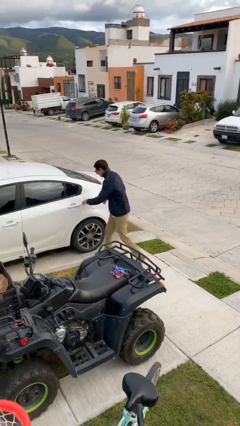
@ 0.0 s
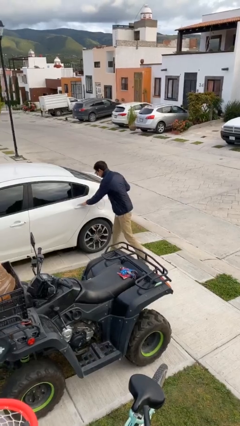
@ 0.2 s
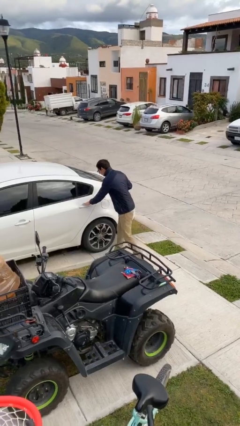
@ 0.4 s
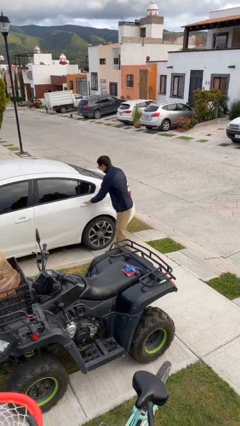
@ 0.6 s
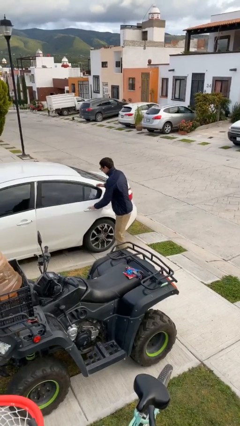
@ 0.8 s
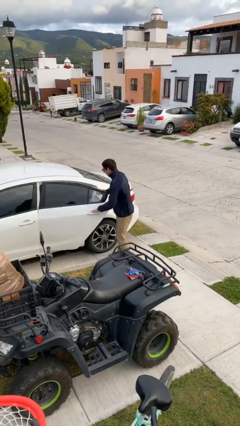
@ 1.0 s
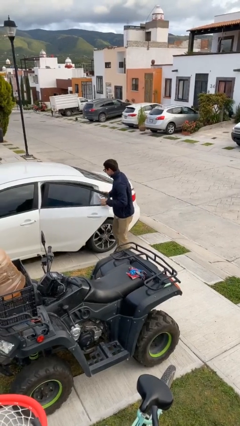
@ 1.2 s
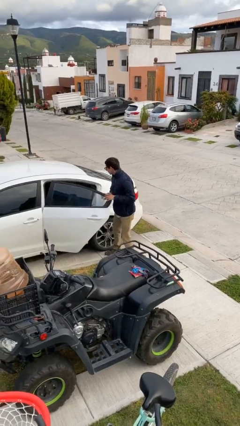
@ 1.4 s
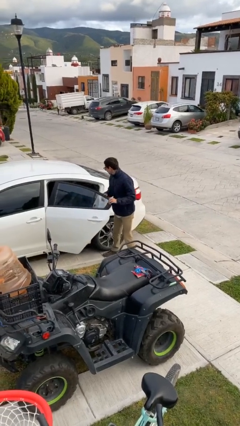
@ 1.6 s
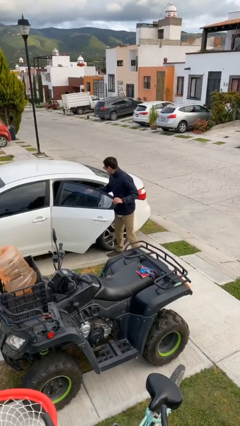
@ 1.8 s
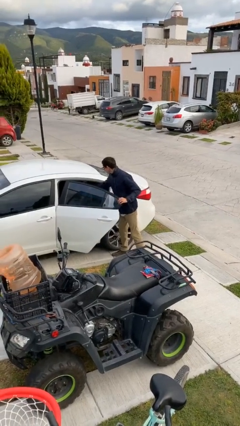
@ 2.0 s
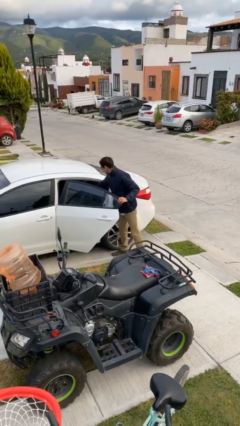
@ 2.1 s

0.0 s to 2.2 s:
person opens car door

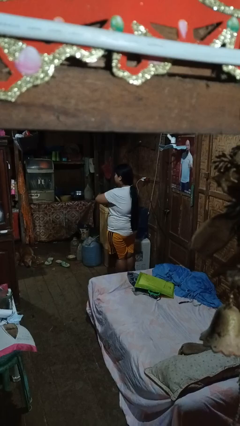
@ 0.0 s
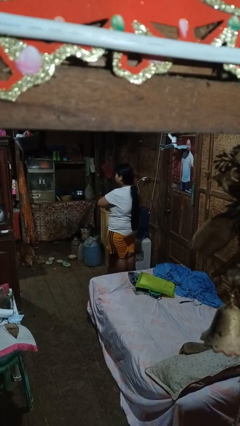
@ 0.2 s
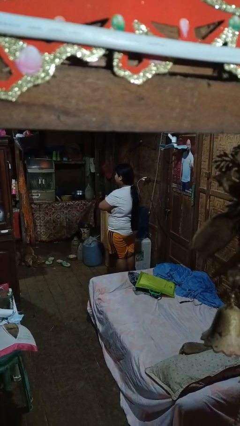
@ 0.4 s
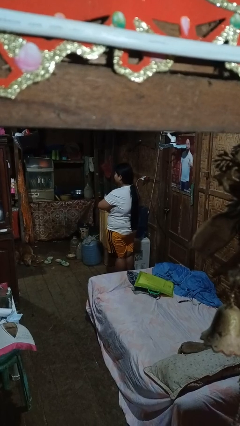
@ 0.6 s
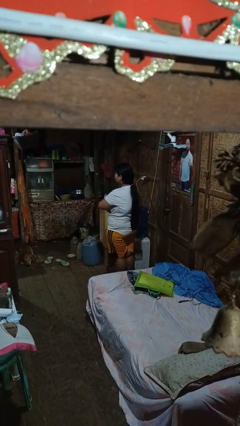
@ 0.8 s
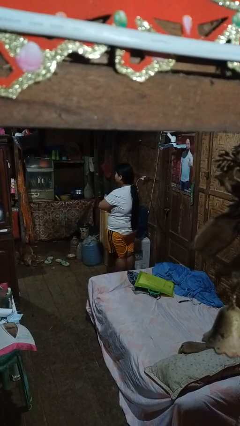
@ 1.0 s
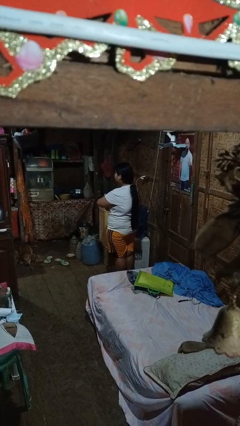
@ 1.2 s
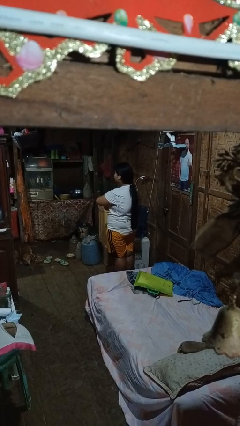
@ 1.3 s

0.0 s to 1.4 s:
person gestures arms x

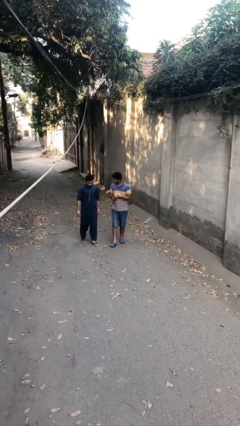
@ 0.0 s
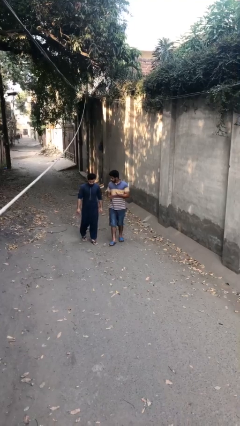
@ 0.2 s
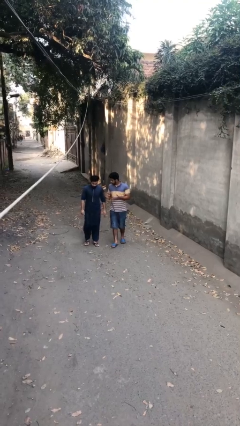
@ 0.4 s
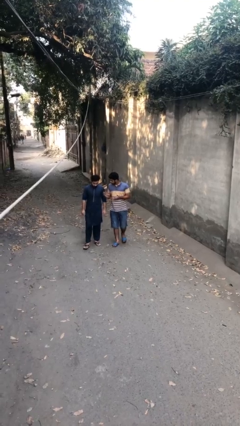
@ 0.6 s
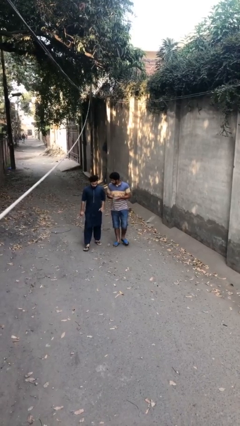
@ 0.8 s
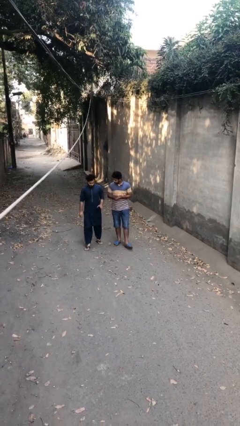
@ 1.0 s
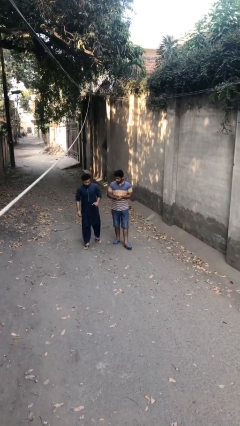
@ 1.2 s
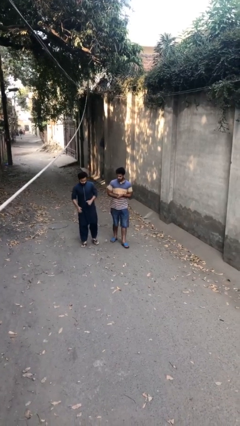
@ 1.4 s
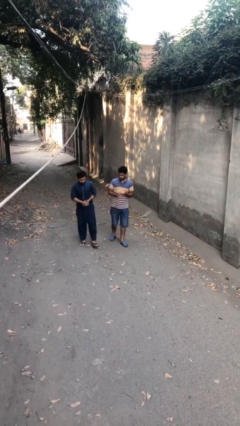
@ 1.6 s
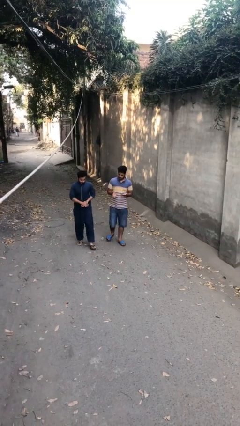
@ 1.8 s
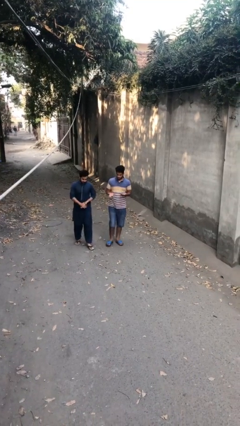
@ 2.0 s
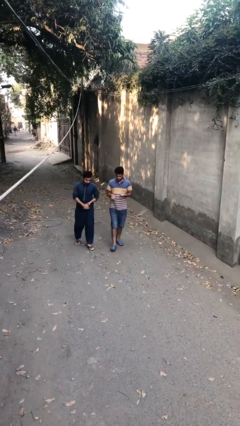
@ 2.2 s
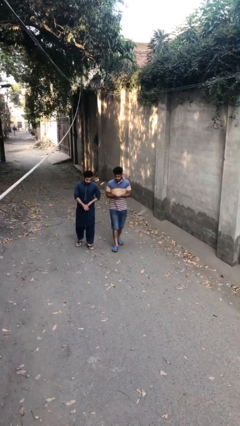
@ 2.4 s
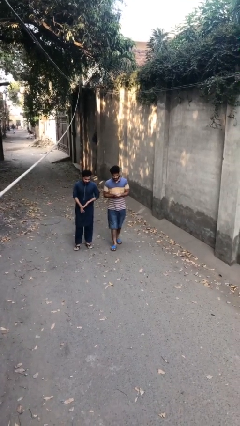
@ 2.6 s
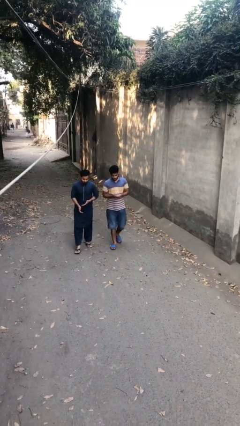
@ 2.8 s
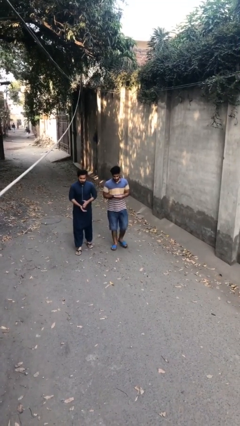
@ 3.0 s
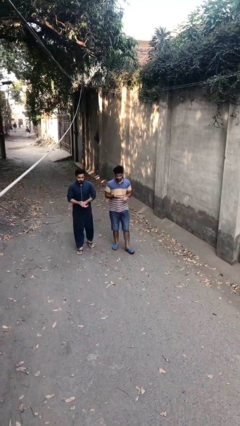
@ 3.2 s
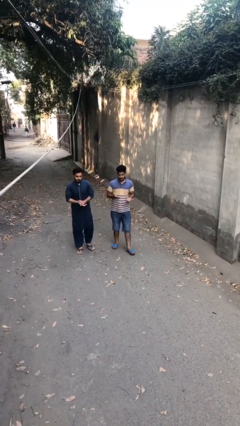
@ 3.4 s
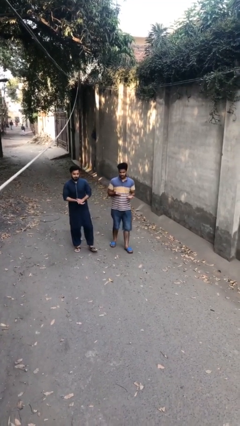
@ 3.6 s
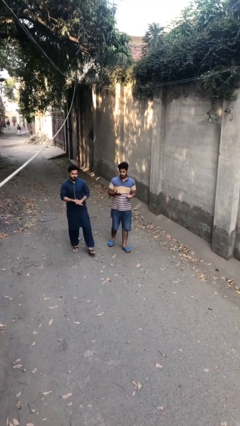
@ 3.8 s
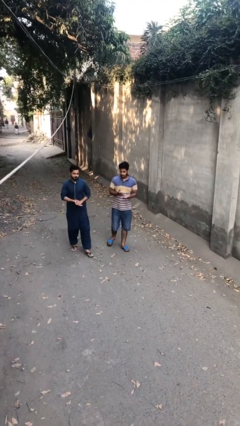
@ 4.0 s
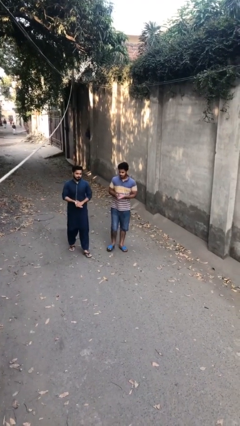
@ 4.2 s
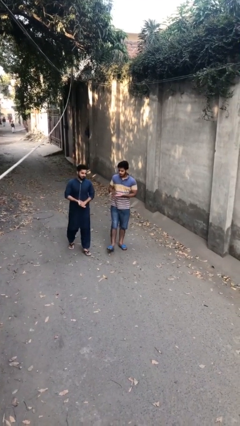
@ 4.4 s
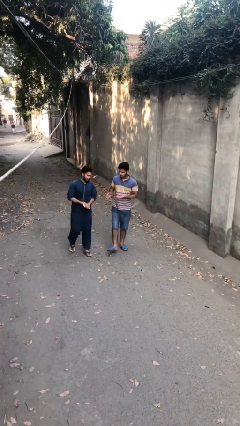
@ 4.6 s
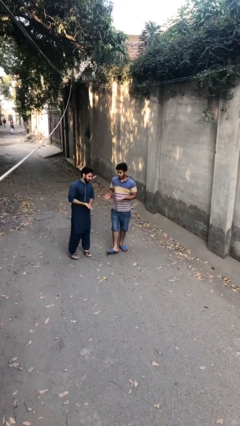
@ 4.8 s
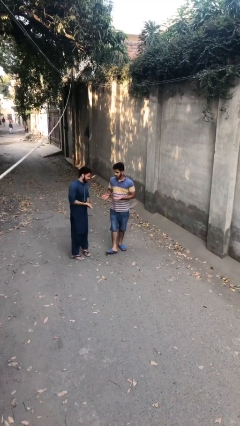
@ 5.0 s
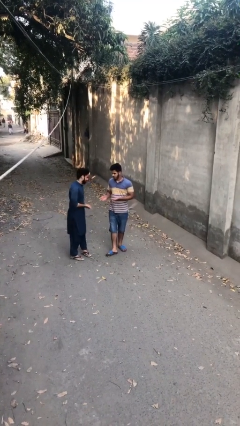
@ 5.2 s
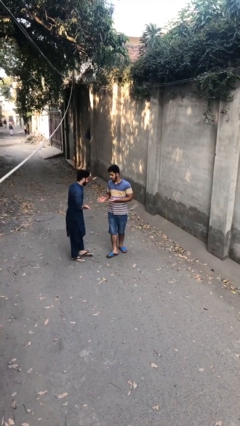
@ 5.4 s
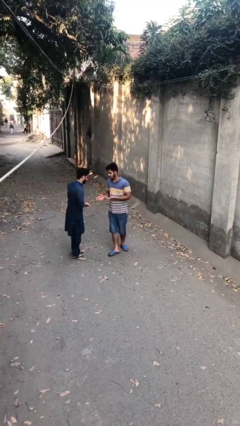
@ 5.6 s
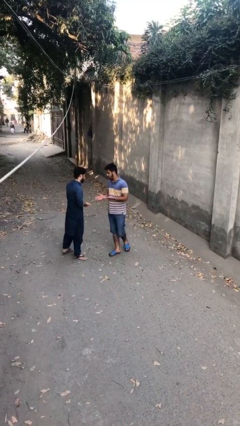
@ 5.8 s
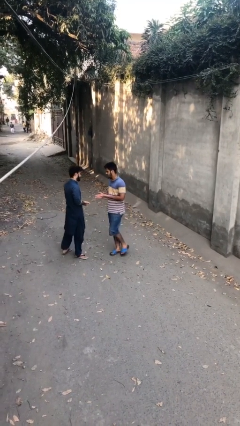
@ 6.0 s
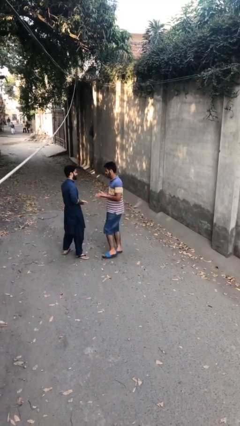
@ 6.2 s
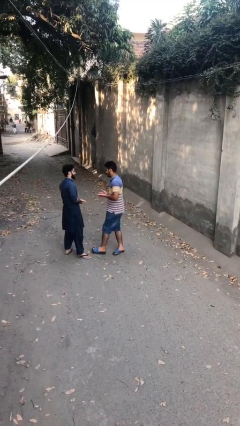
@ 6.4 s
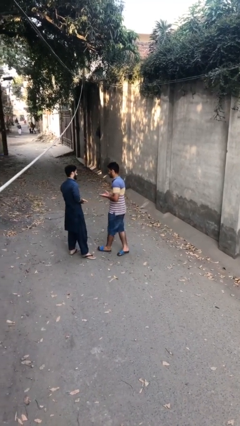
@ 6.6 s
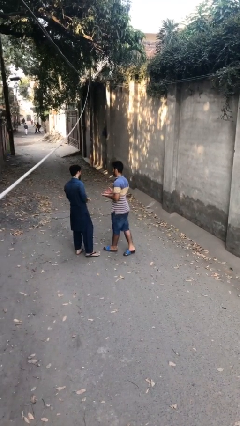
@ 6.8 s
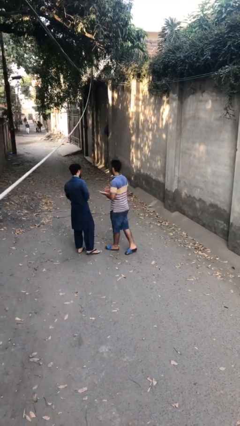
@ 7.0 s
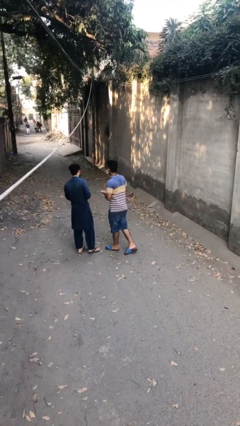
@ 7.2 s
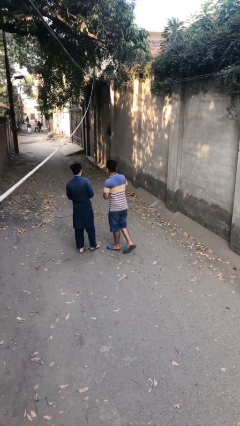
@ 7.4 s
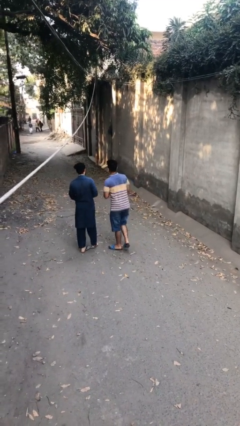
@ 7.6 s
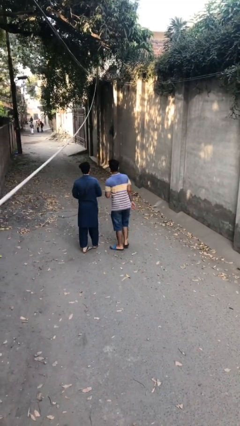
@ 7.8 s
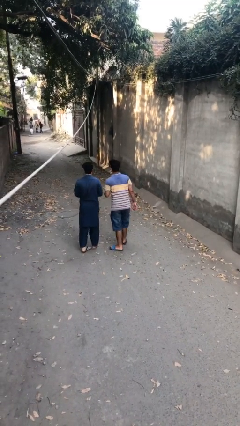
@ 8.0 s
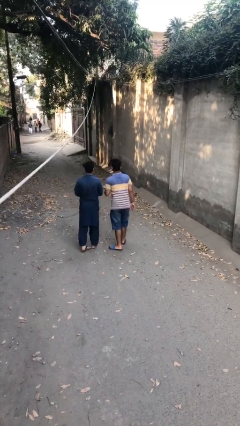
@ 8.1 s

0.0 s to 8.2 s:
person talks to person

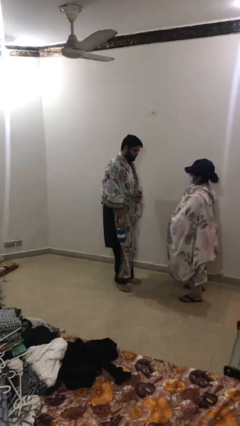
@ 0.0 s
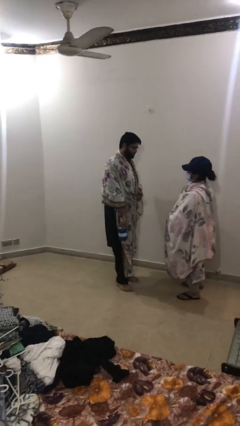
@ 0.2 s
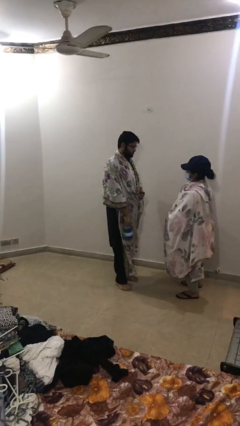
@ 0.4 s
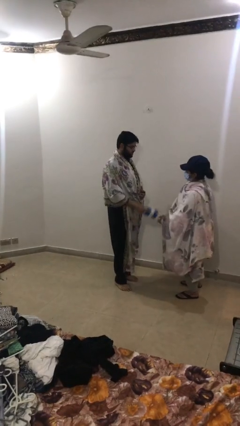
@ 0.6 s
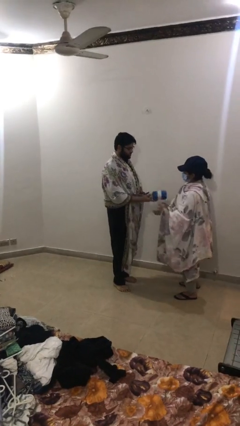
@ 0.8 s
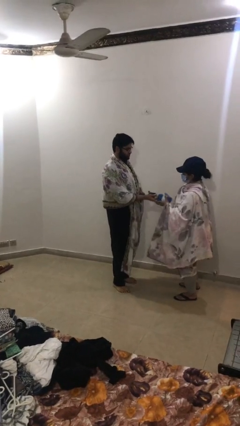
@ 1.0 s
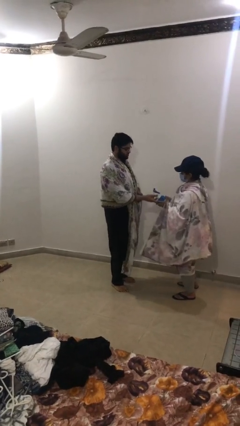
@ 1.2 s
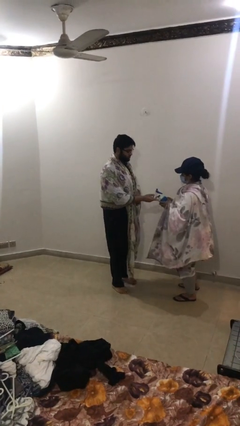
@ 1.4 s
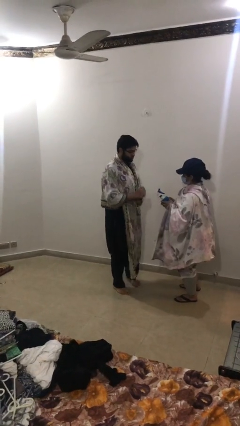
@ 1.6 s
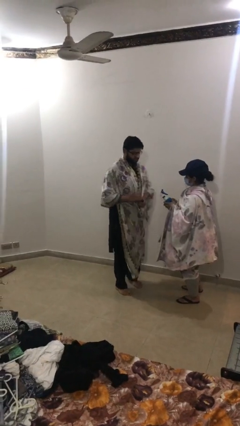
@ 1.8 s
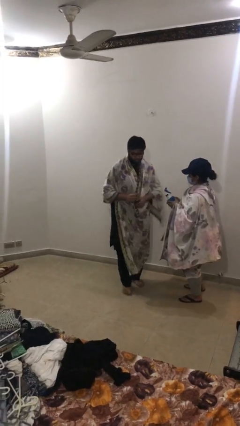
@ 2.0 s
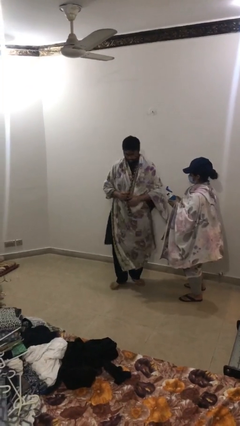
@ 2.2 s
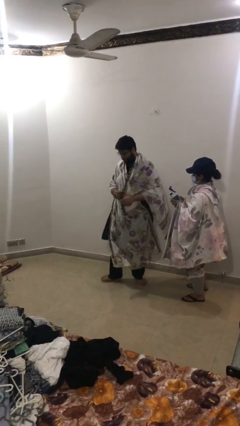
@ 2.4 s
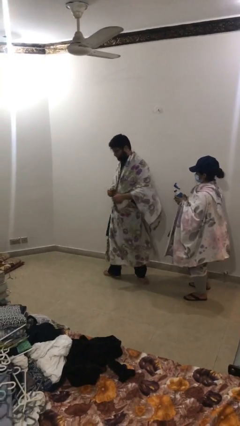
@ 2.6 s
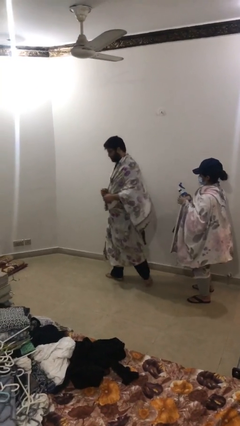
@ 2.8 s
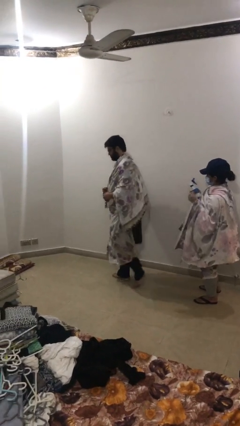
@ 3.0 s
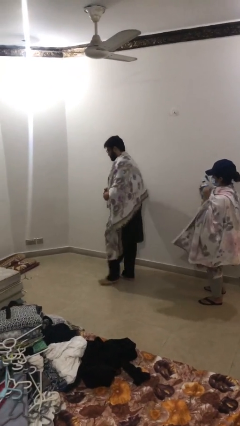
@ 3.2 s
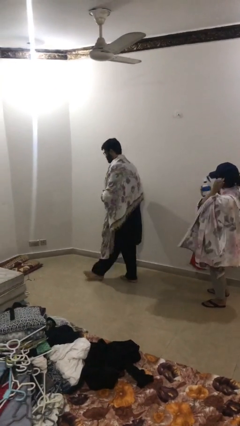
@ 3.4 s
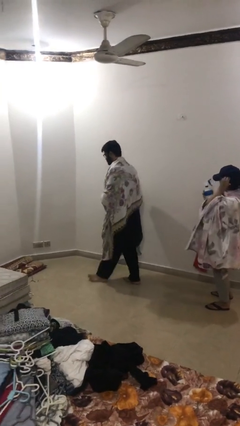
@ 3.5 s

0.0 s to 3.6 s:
person transfers object to person

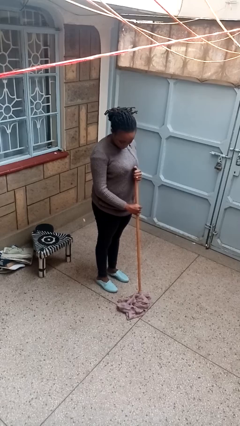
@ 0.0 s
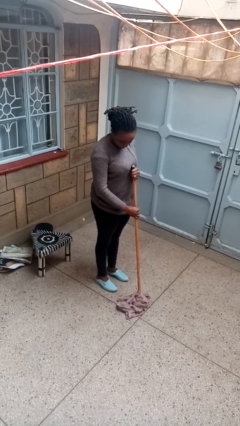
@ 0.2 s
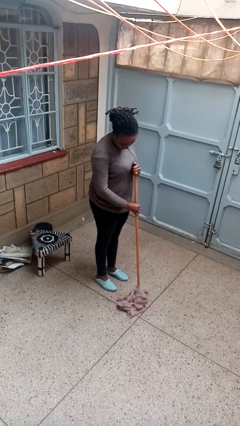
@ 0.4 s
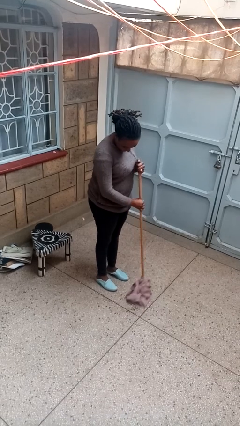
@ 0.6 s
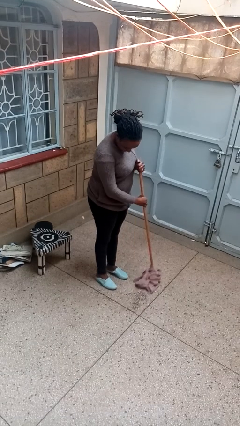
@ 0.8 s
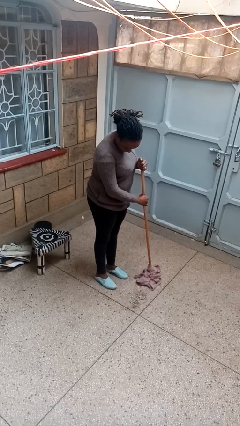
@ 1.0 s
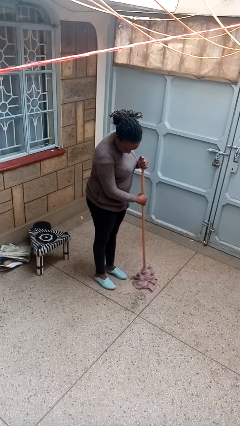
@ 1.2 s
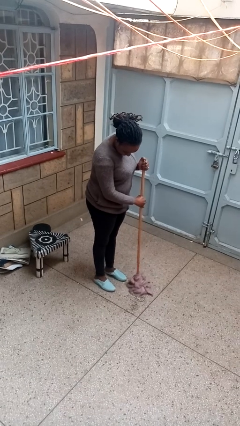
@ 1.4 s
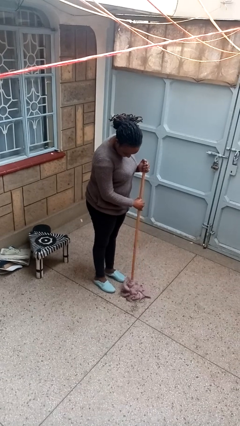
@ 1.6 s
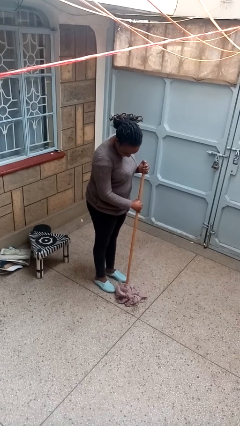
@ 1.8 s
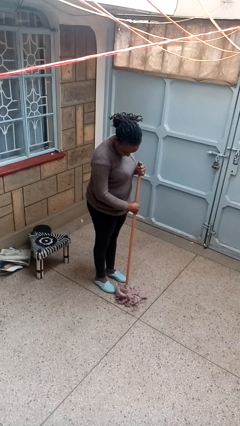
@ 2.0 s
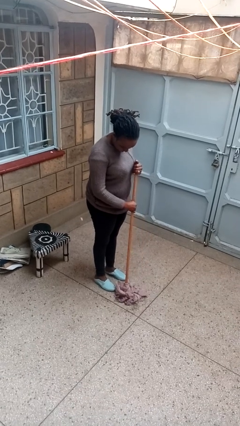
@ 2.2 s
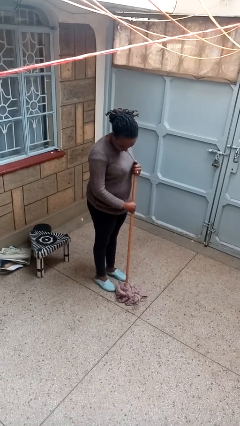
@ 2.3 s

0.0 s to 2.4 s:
person mops
